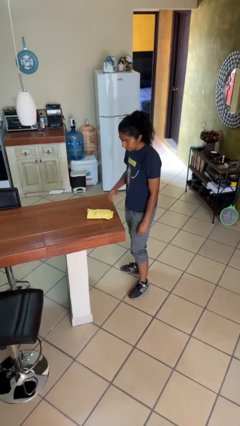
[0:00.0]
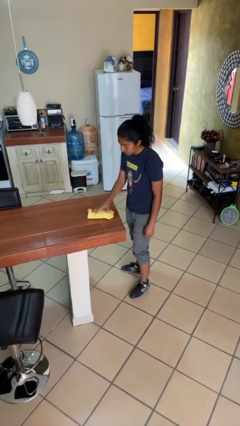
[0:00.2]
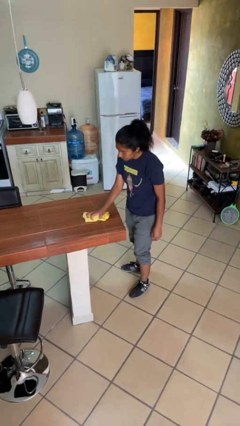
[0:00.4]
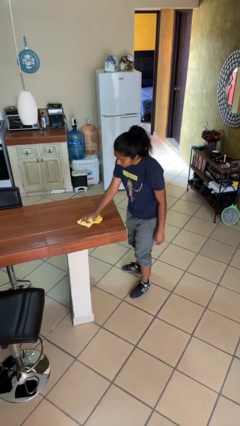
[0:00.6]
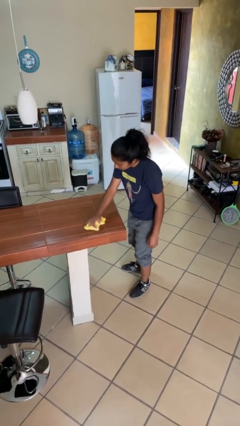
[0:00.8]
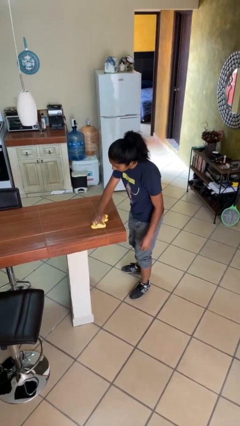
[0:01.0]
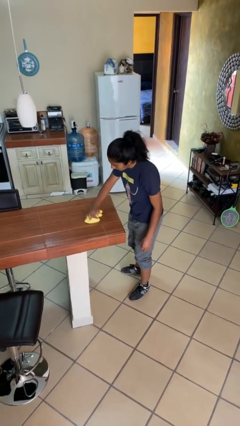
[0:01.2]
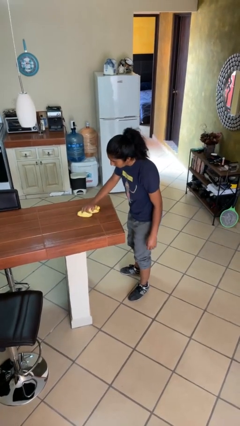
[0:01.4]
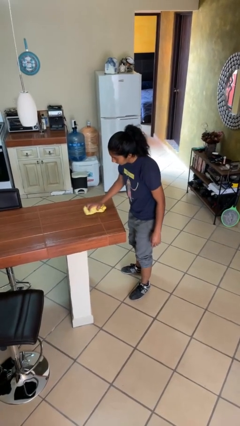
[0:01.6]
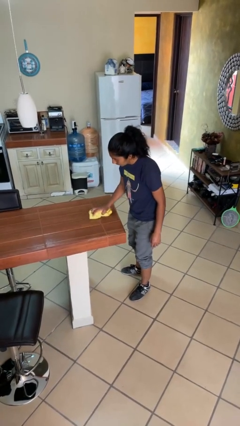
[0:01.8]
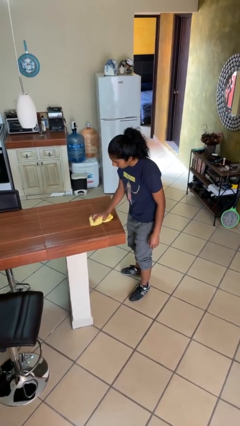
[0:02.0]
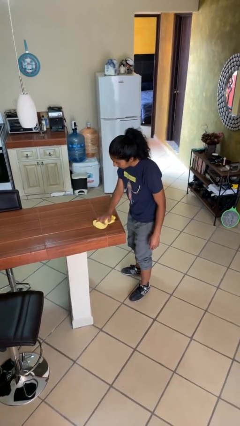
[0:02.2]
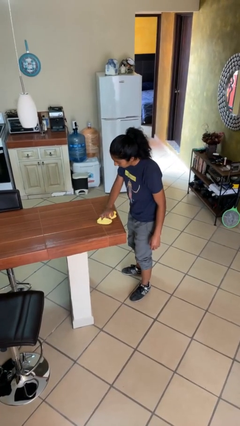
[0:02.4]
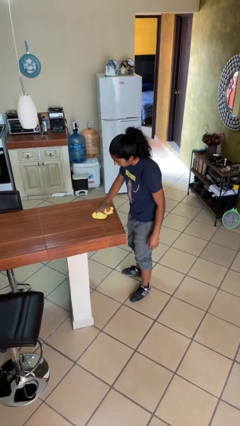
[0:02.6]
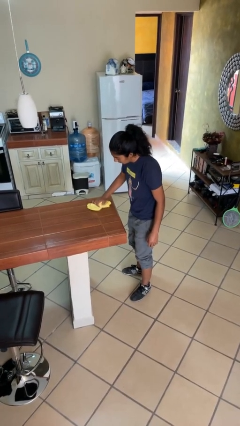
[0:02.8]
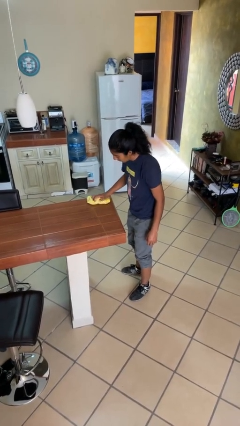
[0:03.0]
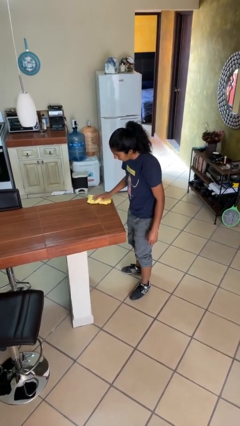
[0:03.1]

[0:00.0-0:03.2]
person cleans table with rag

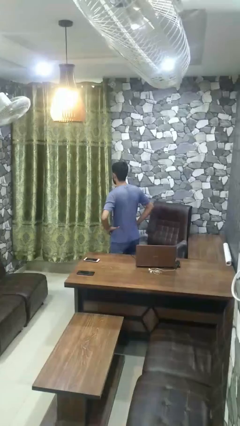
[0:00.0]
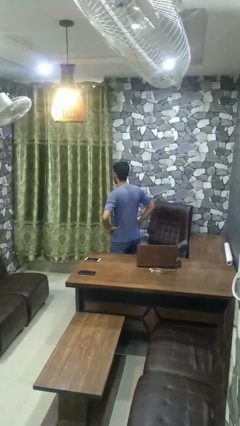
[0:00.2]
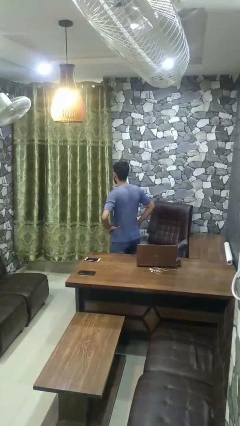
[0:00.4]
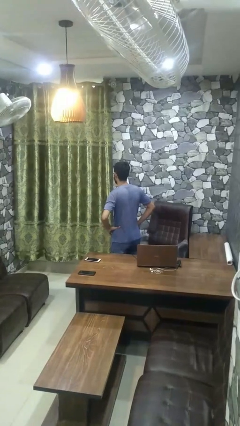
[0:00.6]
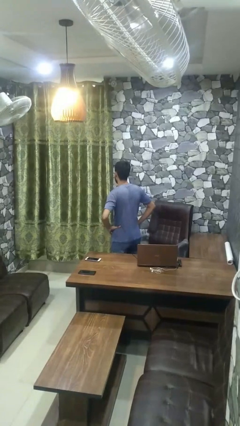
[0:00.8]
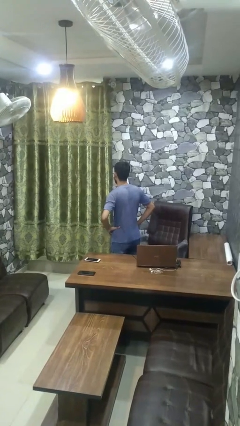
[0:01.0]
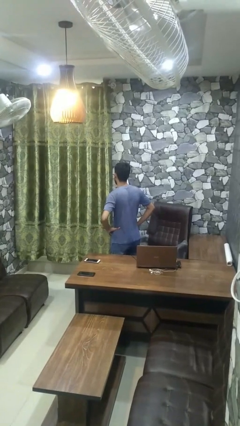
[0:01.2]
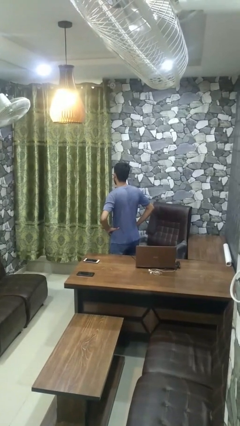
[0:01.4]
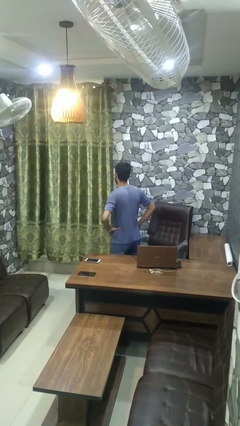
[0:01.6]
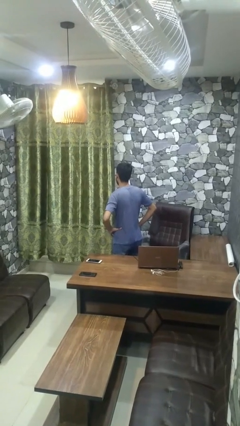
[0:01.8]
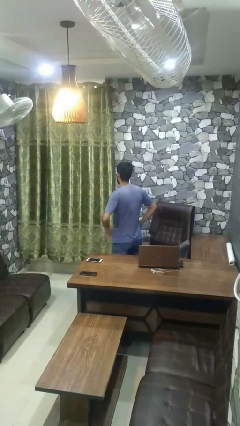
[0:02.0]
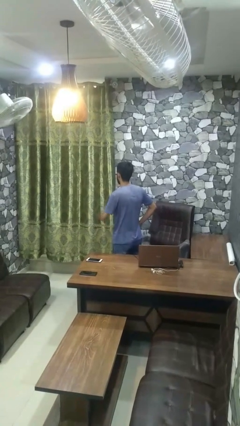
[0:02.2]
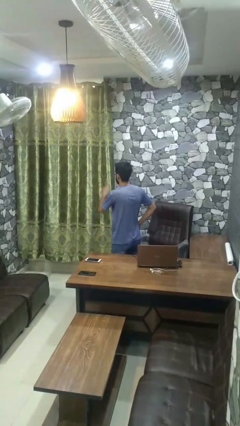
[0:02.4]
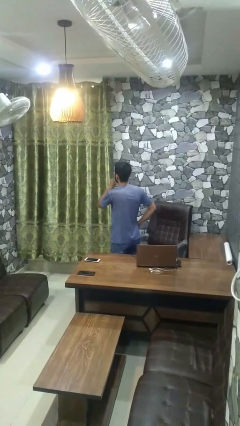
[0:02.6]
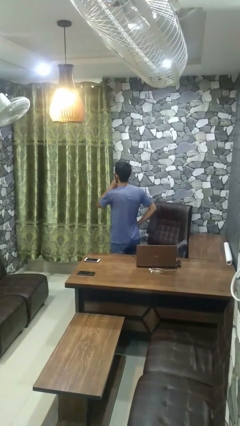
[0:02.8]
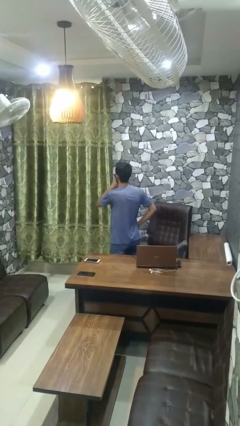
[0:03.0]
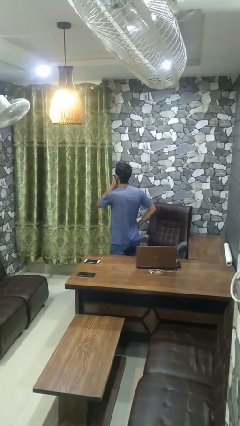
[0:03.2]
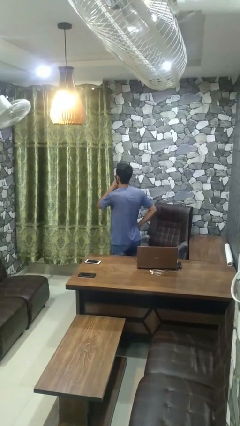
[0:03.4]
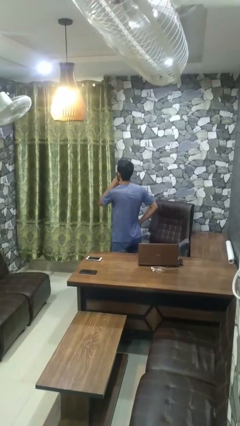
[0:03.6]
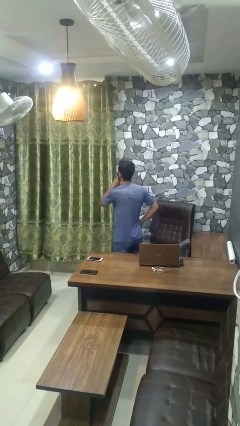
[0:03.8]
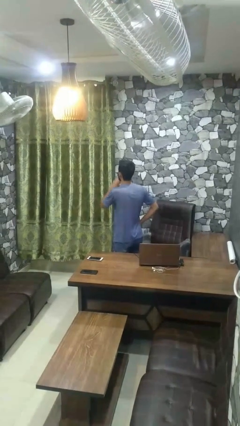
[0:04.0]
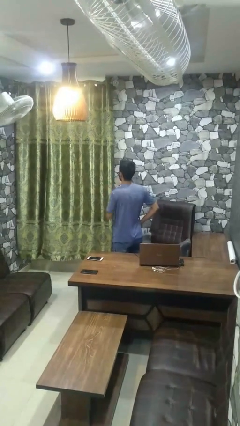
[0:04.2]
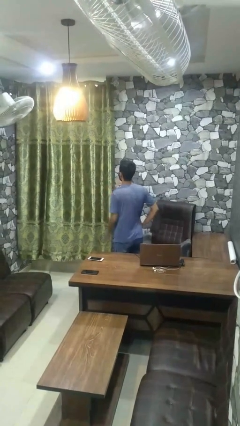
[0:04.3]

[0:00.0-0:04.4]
person gestures be quiet

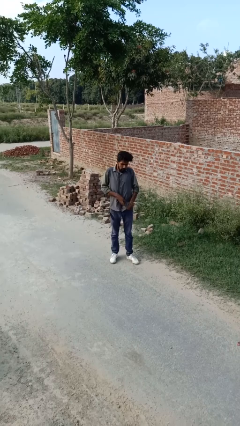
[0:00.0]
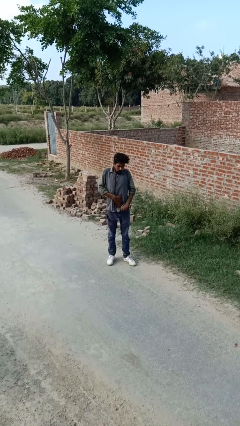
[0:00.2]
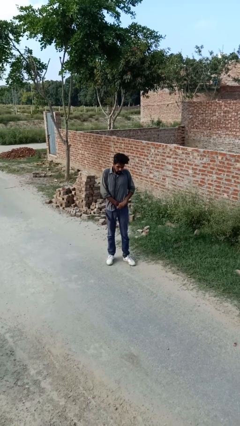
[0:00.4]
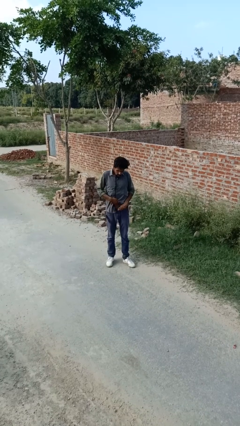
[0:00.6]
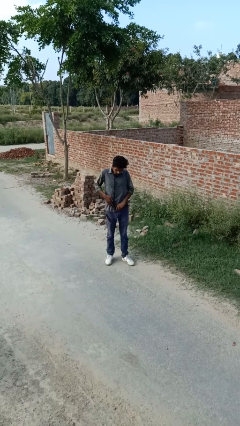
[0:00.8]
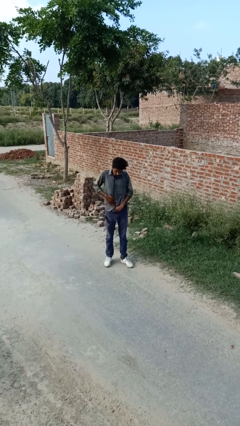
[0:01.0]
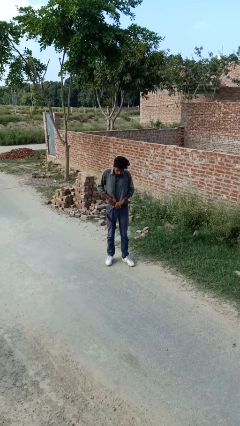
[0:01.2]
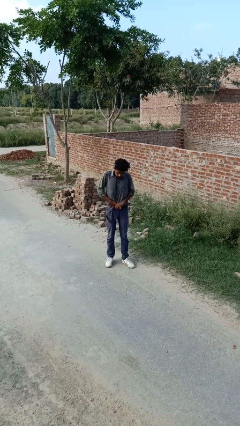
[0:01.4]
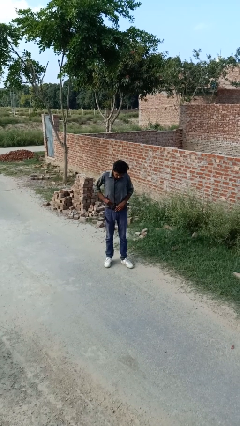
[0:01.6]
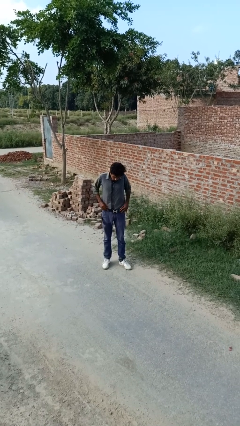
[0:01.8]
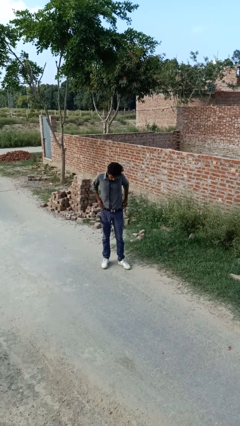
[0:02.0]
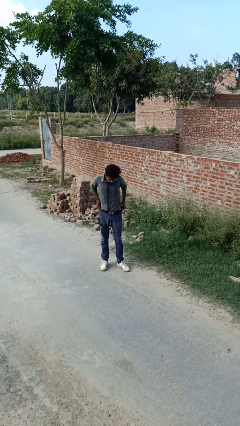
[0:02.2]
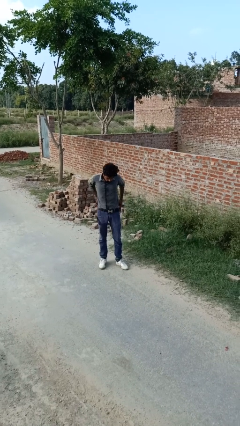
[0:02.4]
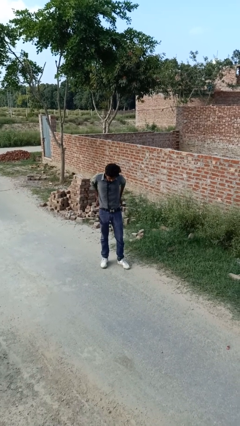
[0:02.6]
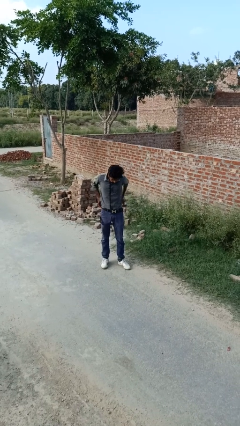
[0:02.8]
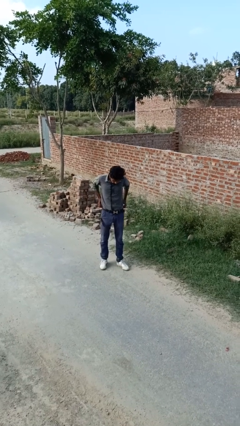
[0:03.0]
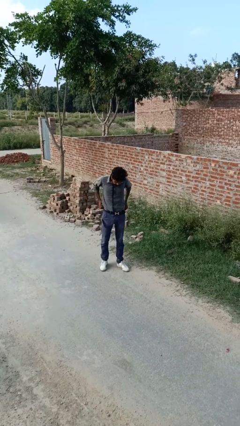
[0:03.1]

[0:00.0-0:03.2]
person tucks in shirt

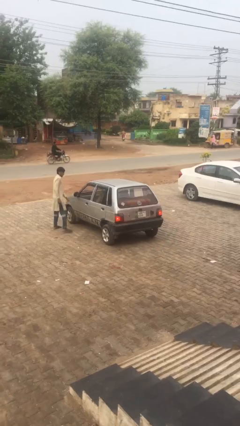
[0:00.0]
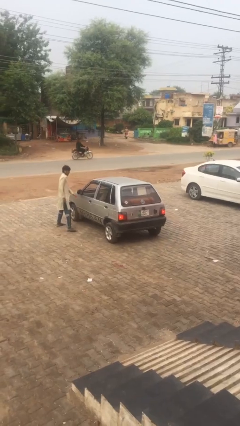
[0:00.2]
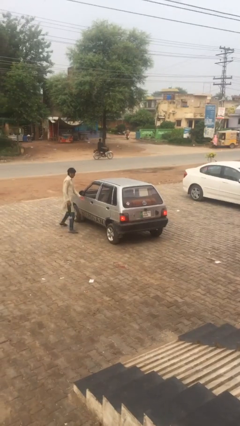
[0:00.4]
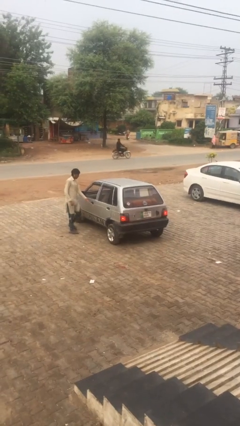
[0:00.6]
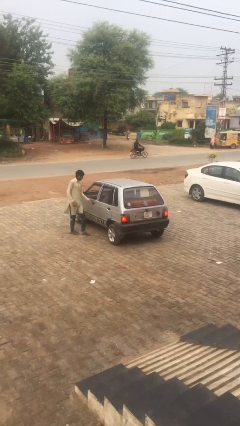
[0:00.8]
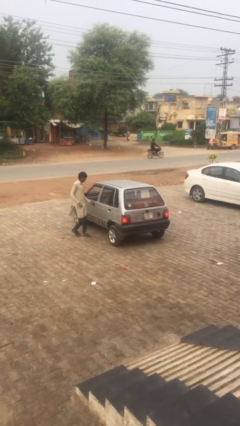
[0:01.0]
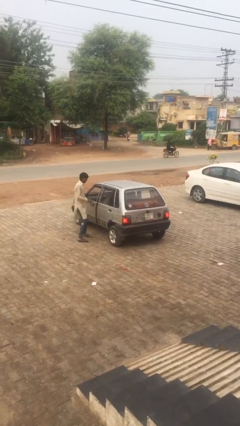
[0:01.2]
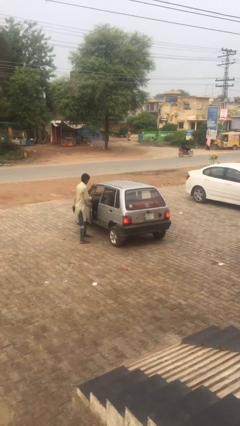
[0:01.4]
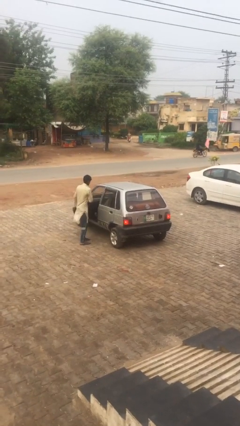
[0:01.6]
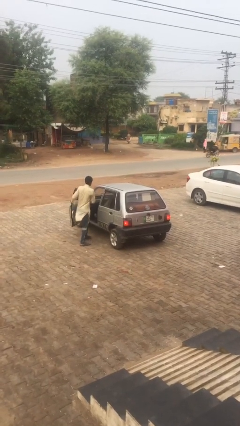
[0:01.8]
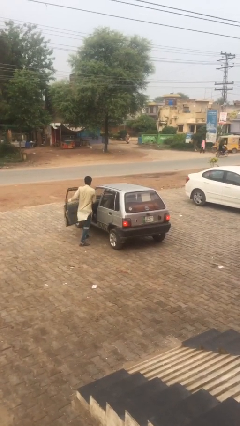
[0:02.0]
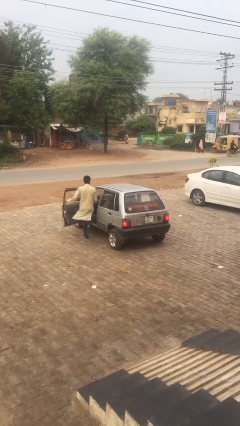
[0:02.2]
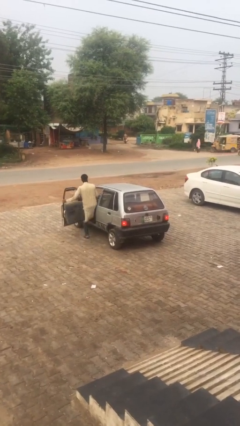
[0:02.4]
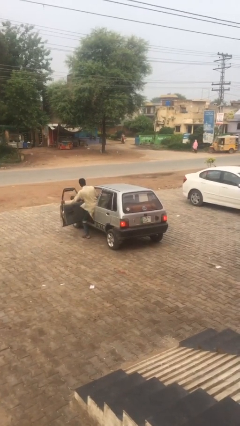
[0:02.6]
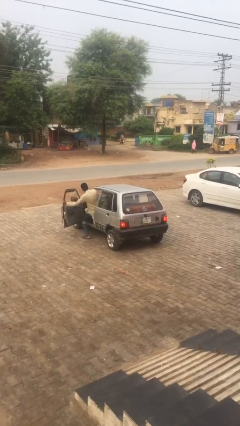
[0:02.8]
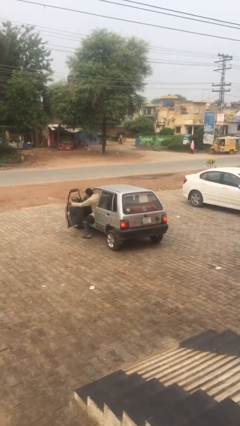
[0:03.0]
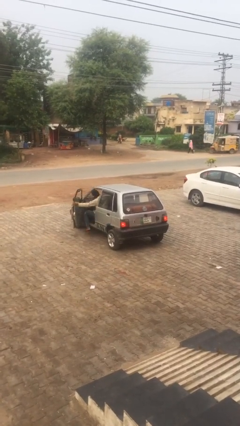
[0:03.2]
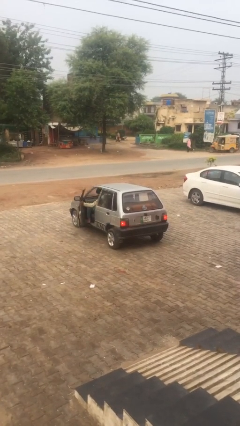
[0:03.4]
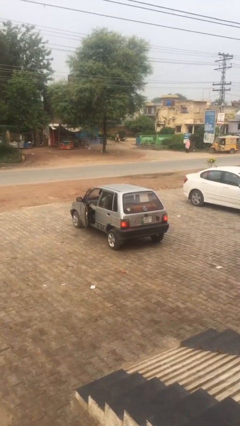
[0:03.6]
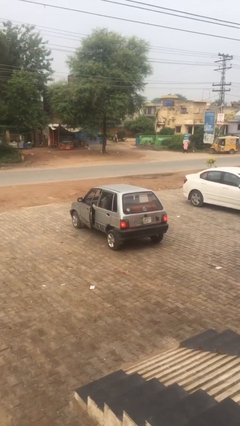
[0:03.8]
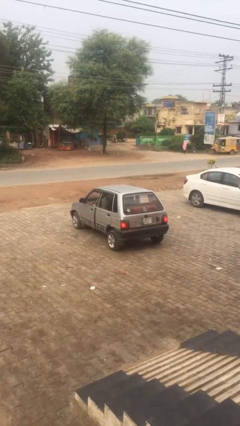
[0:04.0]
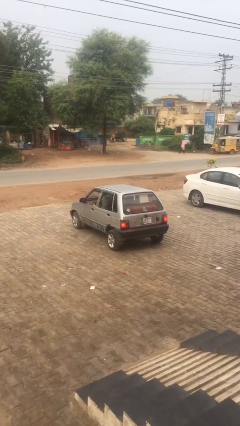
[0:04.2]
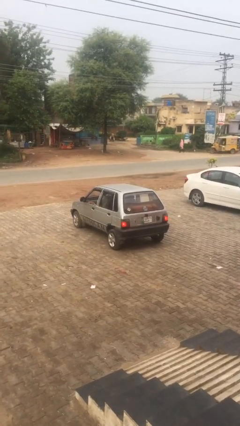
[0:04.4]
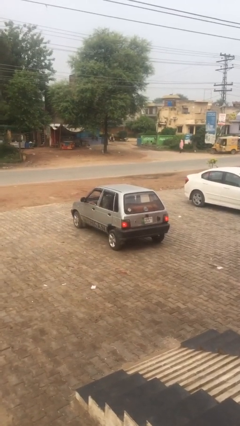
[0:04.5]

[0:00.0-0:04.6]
car picks up person

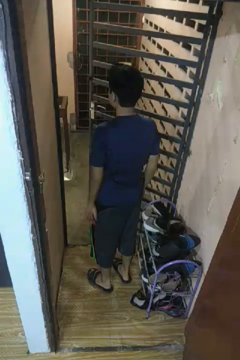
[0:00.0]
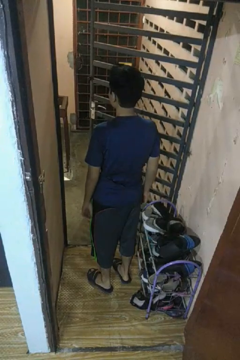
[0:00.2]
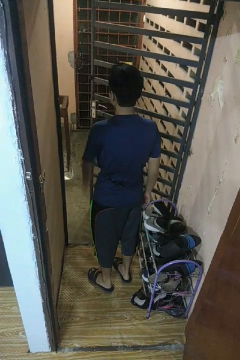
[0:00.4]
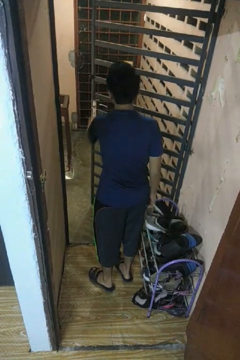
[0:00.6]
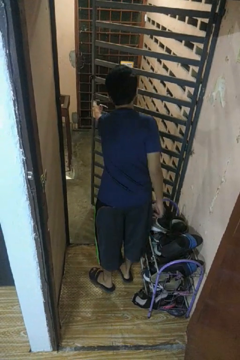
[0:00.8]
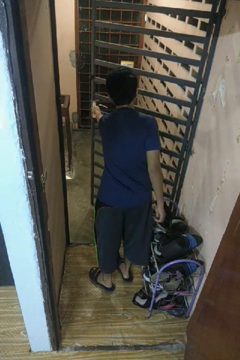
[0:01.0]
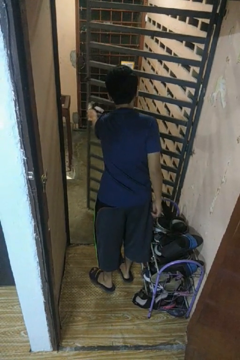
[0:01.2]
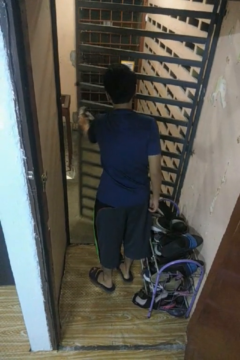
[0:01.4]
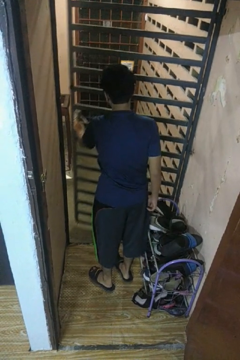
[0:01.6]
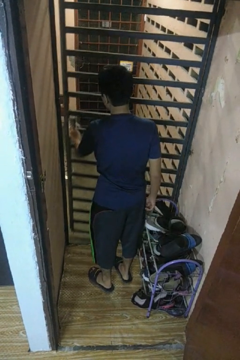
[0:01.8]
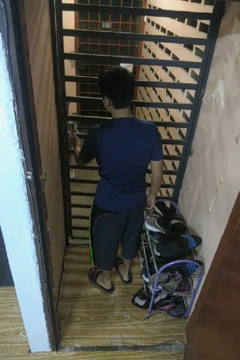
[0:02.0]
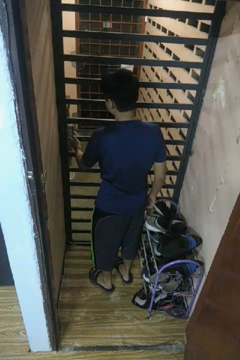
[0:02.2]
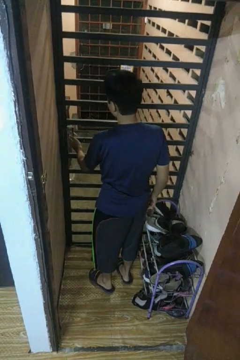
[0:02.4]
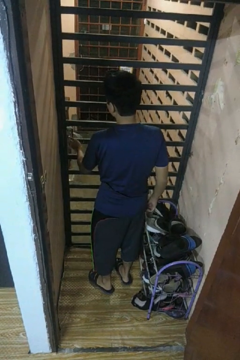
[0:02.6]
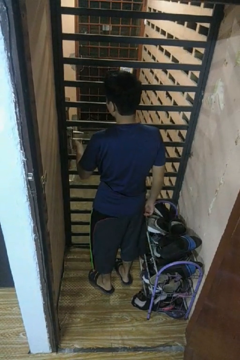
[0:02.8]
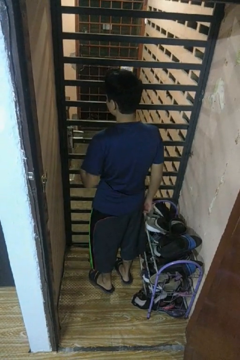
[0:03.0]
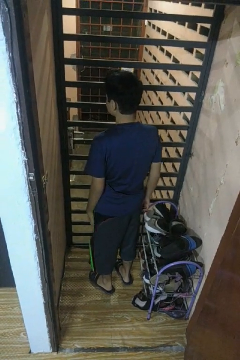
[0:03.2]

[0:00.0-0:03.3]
person closes gate
